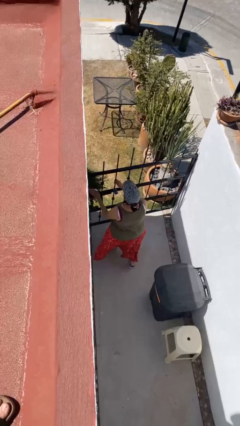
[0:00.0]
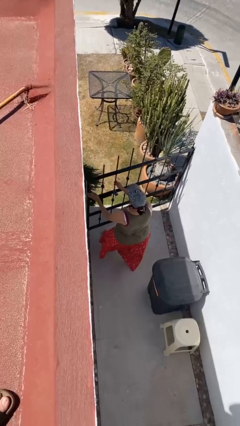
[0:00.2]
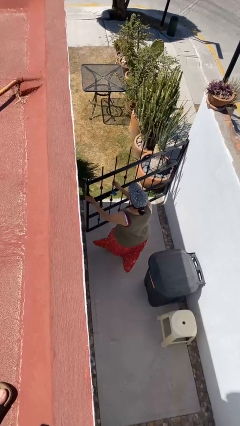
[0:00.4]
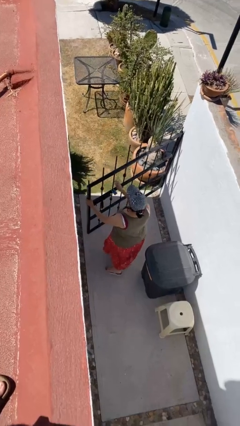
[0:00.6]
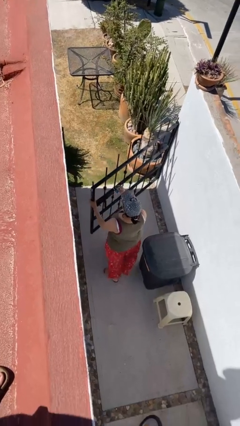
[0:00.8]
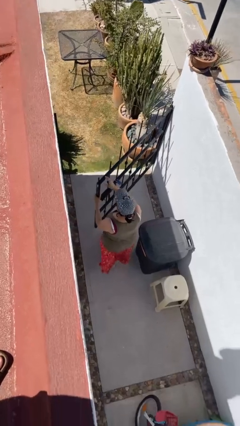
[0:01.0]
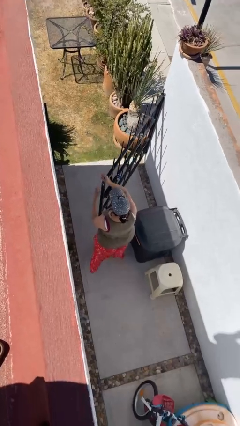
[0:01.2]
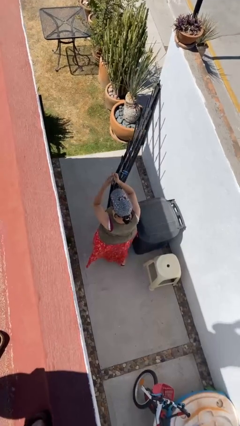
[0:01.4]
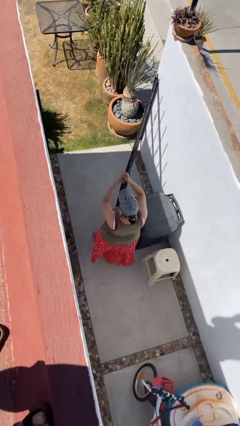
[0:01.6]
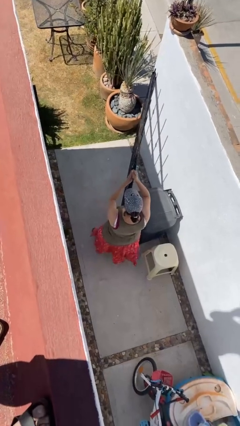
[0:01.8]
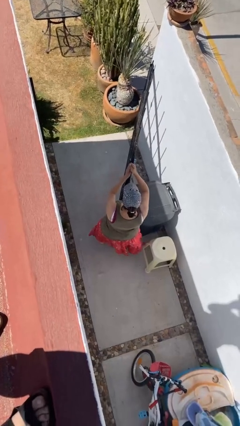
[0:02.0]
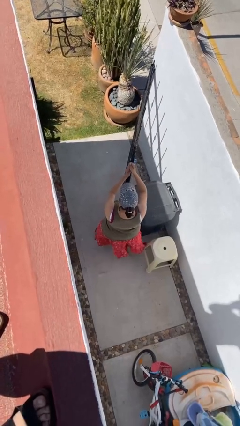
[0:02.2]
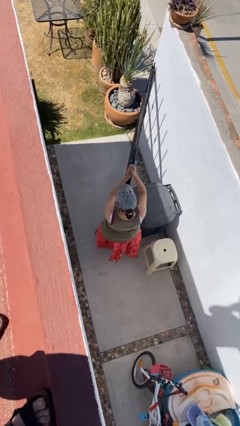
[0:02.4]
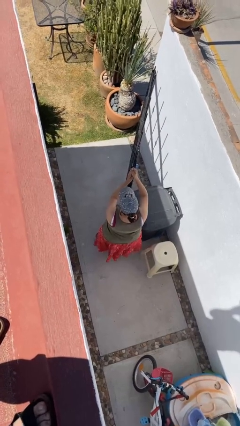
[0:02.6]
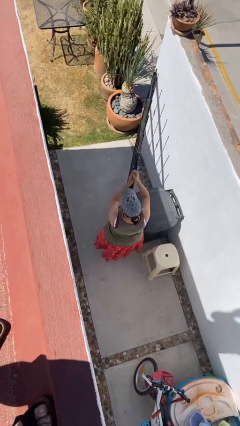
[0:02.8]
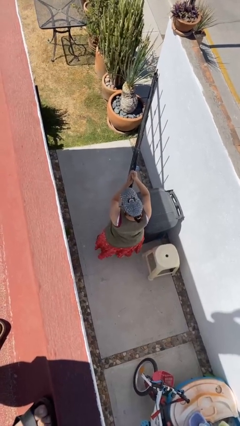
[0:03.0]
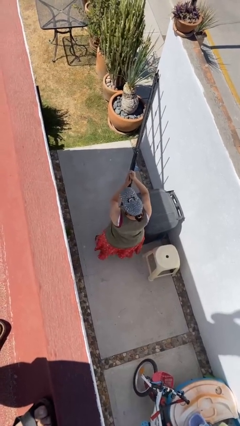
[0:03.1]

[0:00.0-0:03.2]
person opens facility door

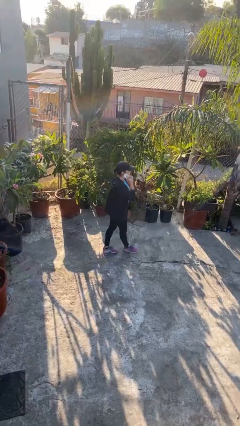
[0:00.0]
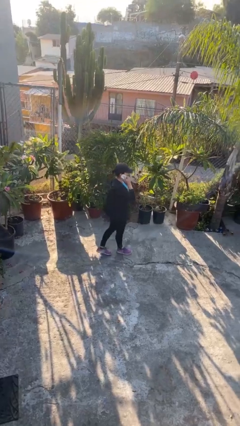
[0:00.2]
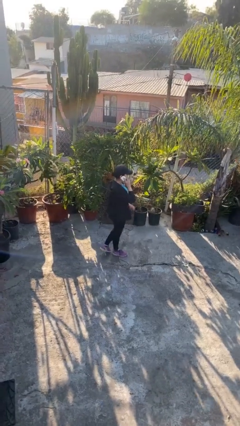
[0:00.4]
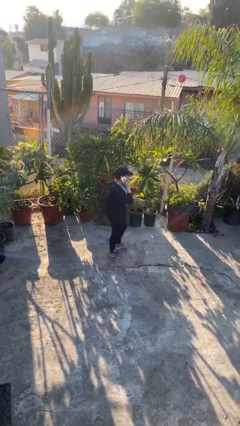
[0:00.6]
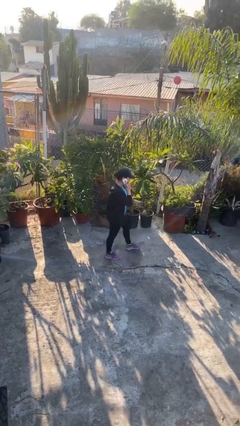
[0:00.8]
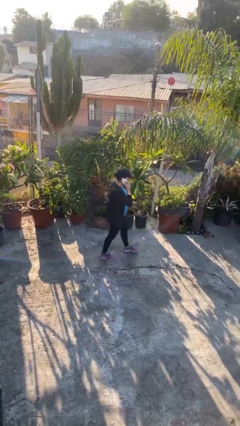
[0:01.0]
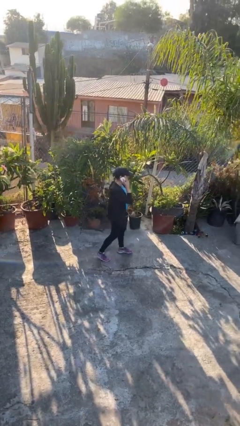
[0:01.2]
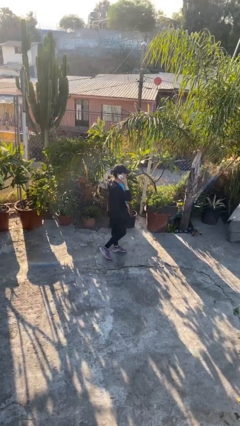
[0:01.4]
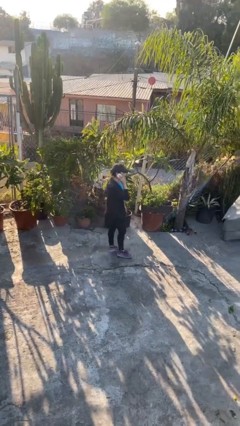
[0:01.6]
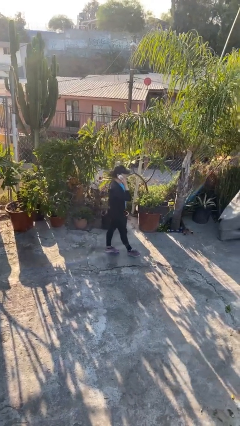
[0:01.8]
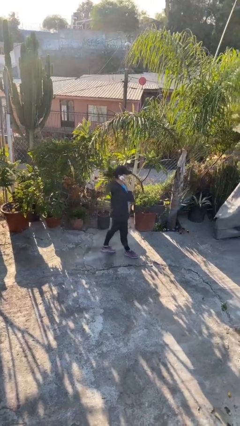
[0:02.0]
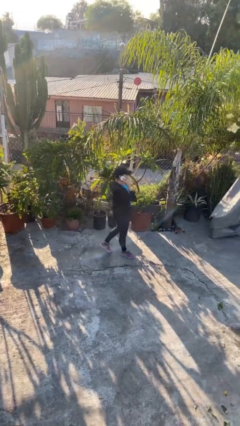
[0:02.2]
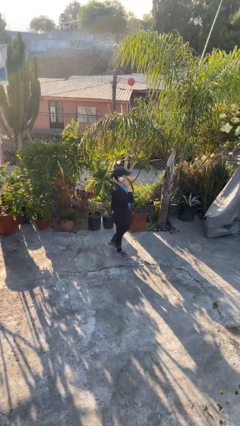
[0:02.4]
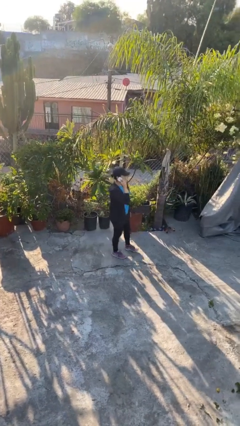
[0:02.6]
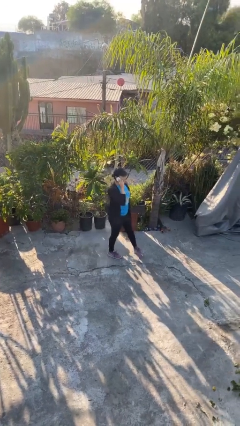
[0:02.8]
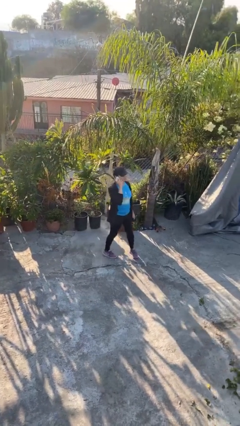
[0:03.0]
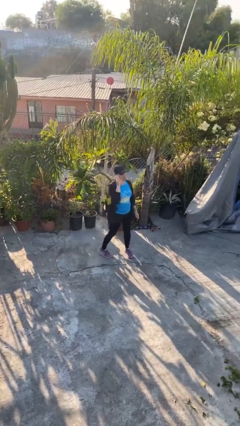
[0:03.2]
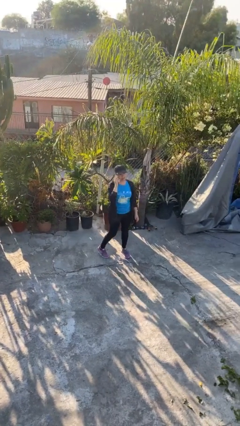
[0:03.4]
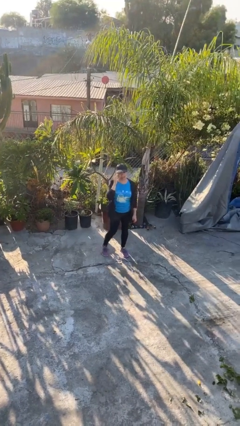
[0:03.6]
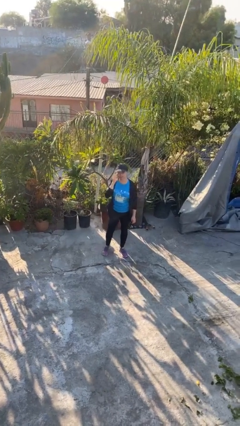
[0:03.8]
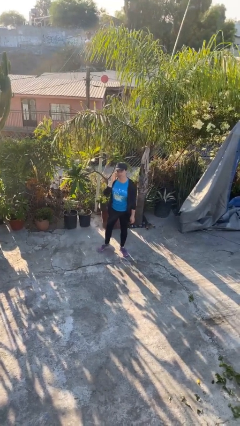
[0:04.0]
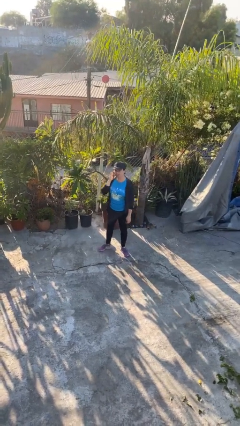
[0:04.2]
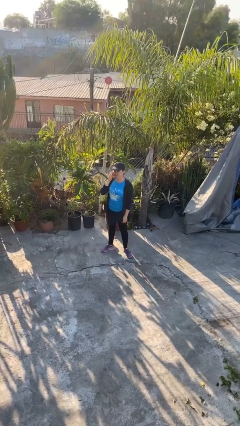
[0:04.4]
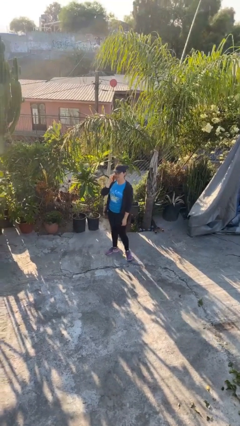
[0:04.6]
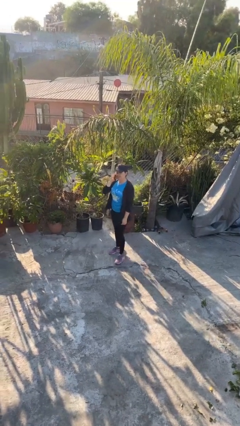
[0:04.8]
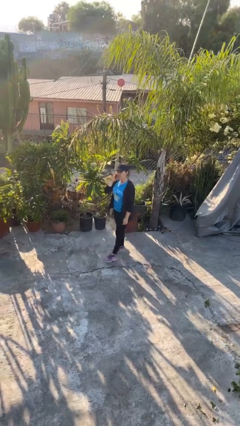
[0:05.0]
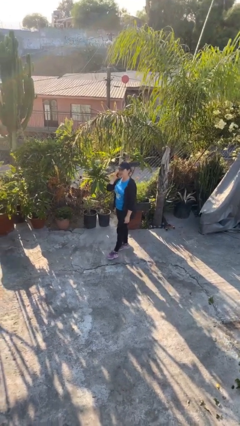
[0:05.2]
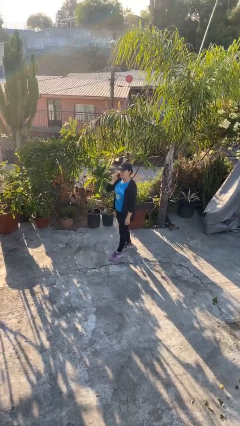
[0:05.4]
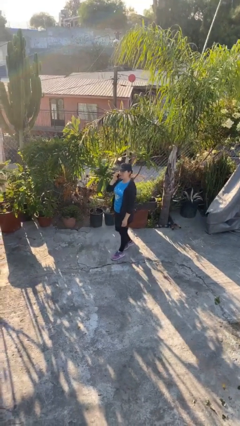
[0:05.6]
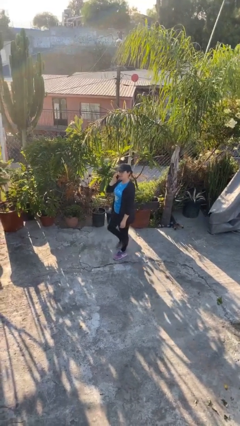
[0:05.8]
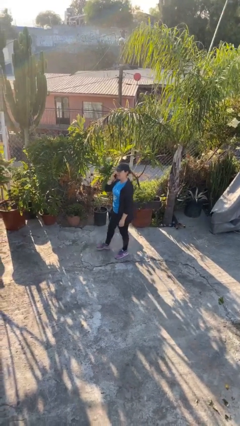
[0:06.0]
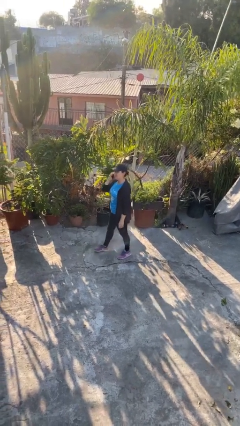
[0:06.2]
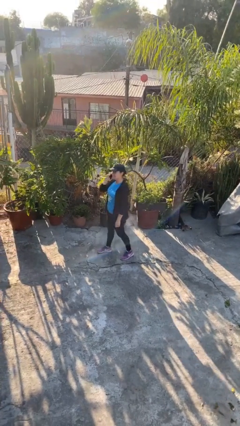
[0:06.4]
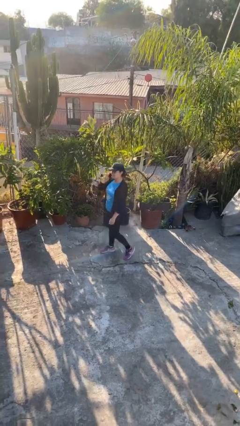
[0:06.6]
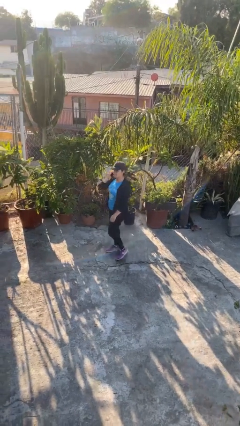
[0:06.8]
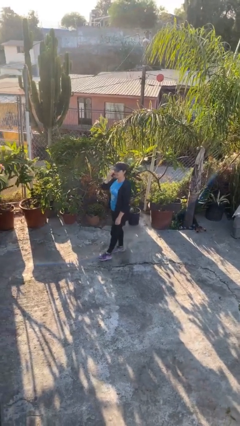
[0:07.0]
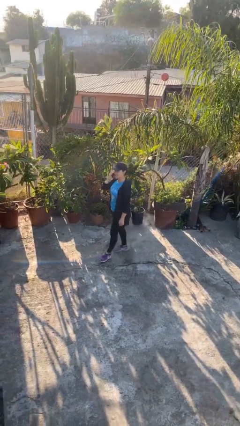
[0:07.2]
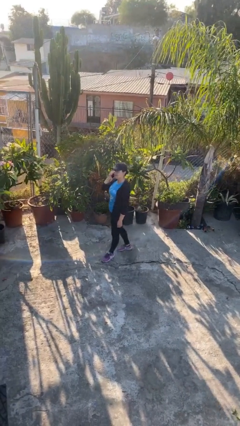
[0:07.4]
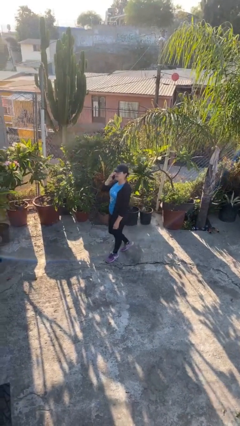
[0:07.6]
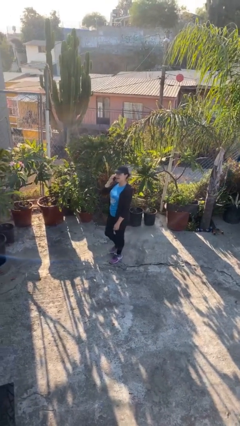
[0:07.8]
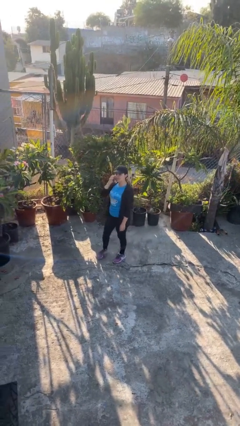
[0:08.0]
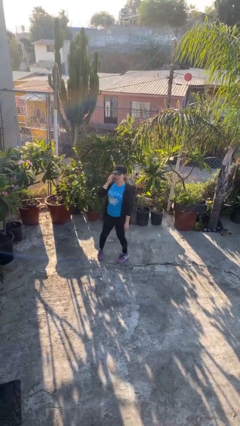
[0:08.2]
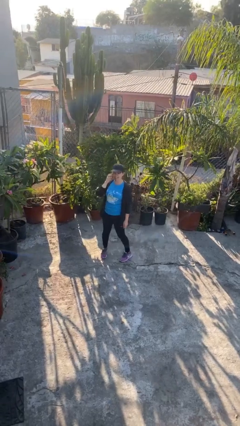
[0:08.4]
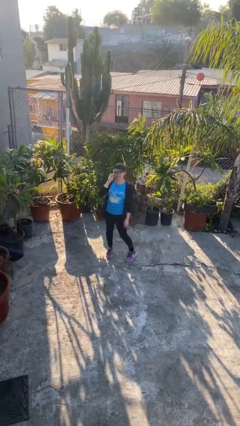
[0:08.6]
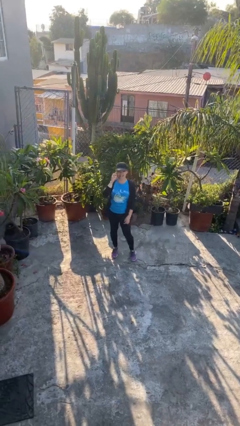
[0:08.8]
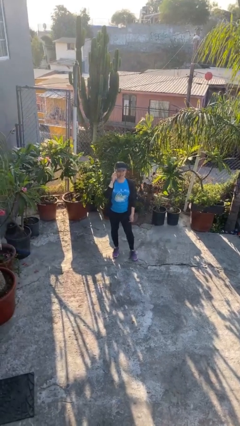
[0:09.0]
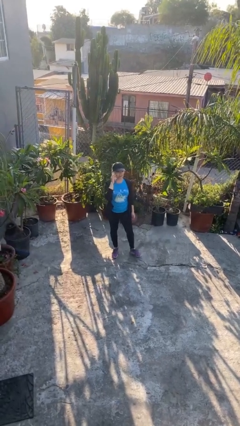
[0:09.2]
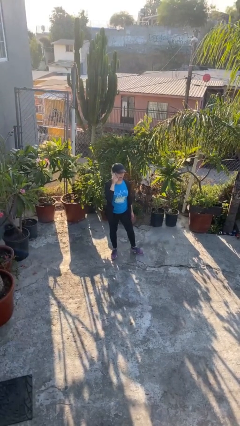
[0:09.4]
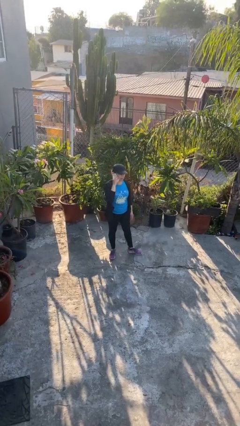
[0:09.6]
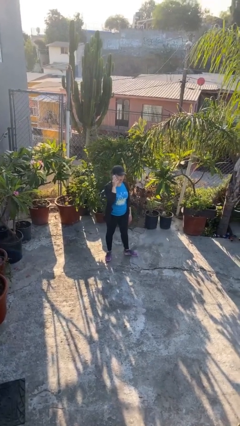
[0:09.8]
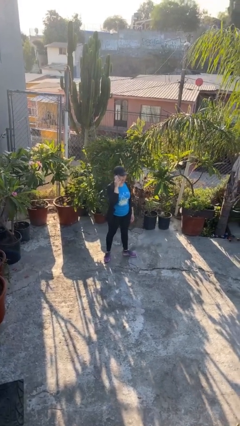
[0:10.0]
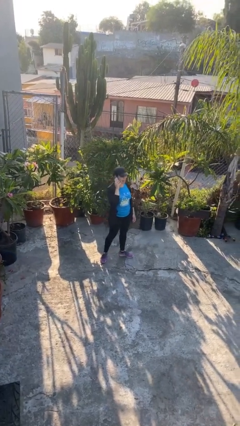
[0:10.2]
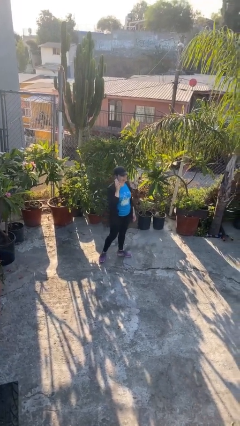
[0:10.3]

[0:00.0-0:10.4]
person talks on phone

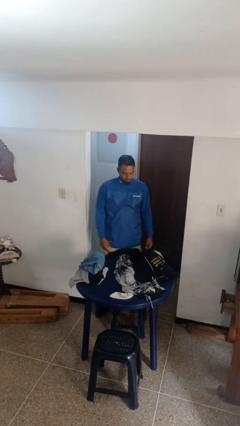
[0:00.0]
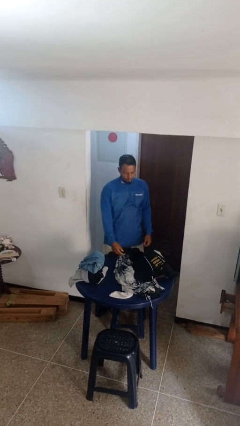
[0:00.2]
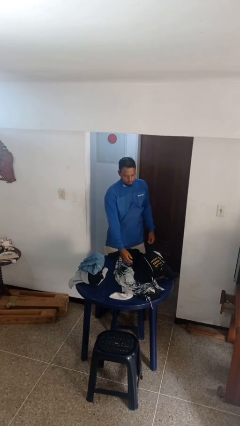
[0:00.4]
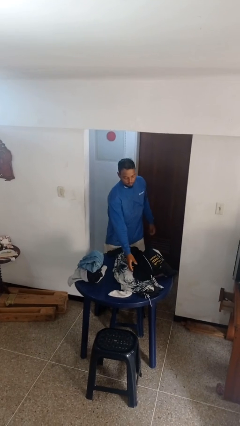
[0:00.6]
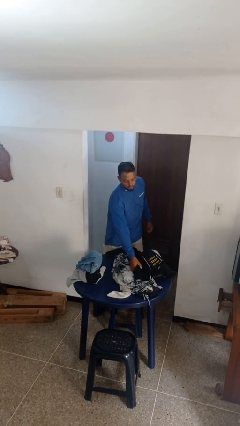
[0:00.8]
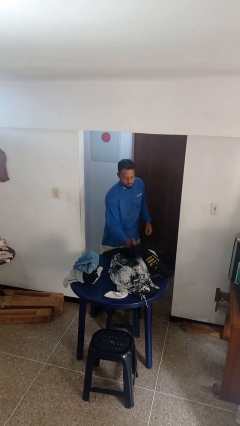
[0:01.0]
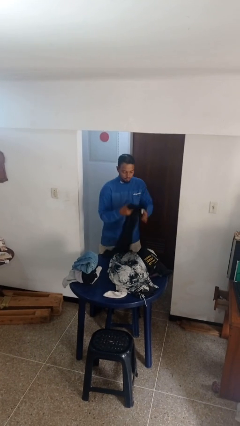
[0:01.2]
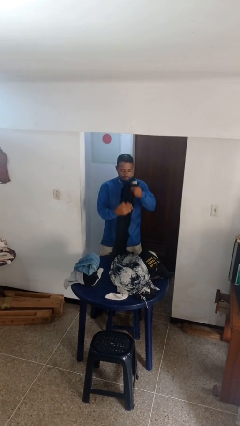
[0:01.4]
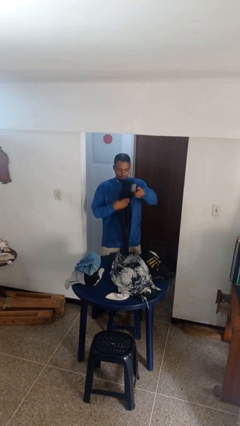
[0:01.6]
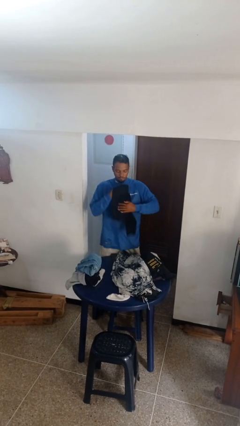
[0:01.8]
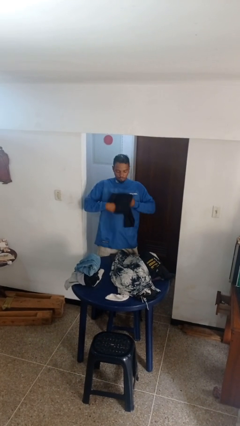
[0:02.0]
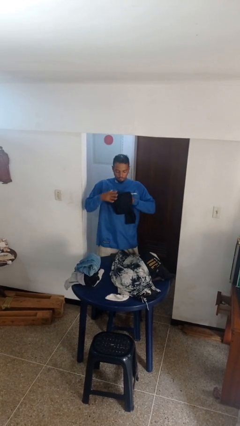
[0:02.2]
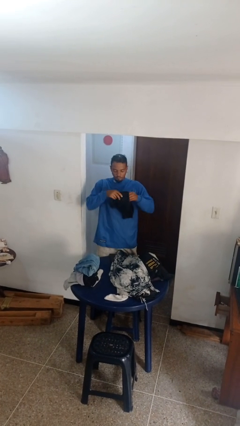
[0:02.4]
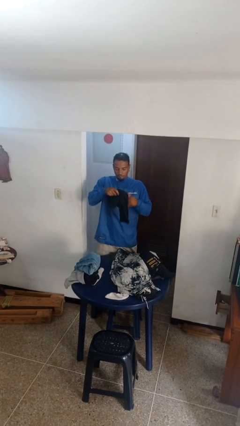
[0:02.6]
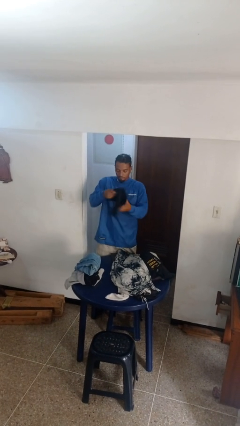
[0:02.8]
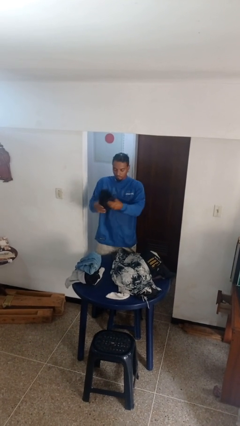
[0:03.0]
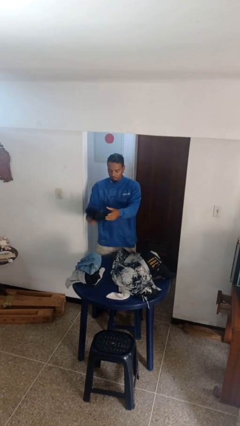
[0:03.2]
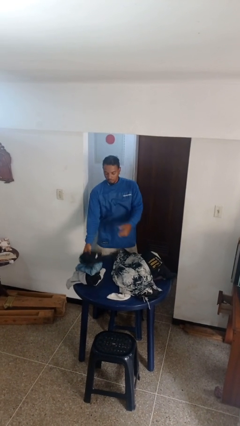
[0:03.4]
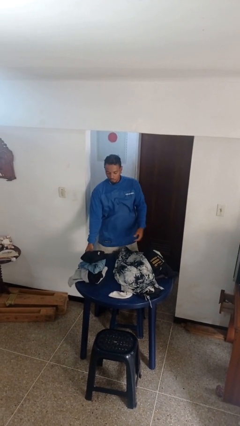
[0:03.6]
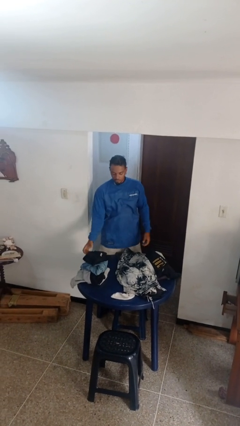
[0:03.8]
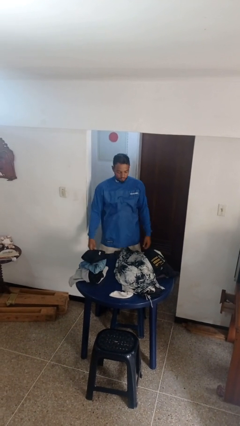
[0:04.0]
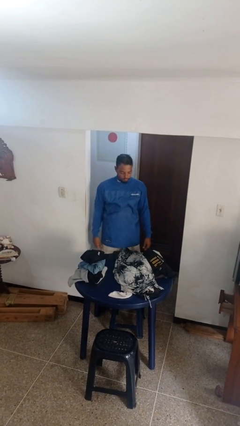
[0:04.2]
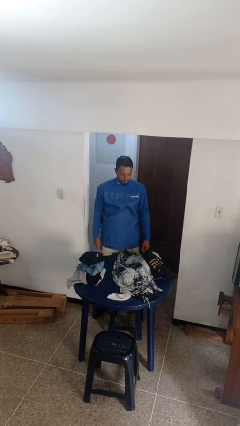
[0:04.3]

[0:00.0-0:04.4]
person folds pants
